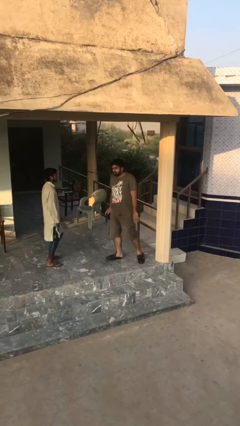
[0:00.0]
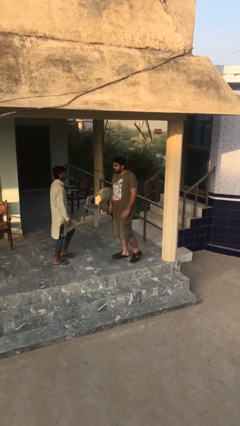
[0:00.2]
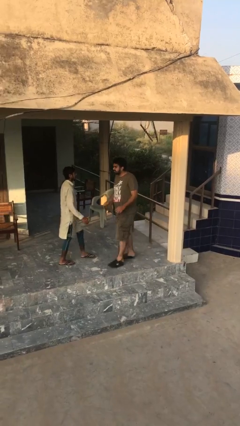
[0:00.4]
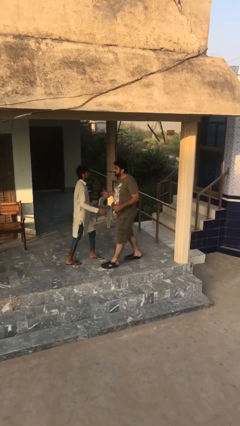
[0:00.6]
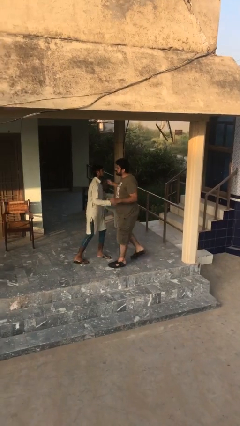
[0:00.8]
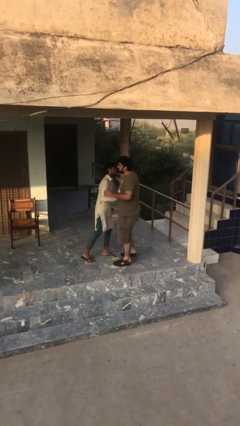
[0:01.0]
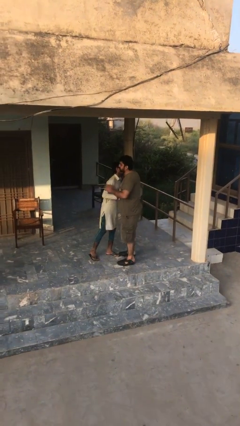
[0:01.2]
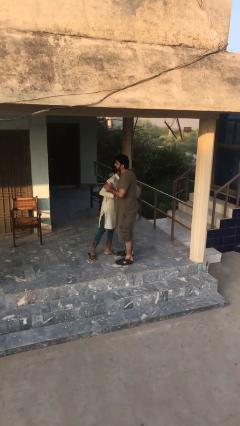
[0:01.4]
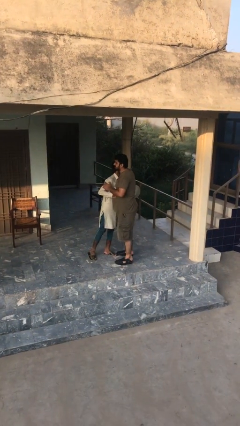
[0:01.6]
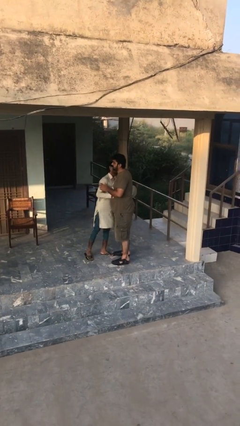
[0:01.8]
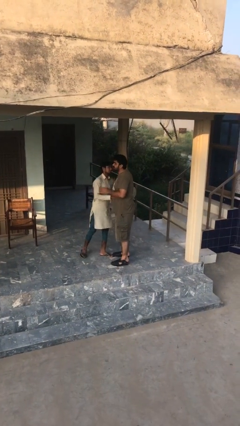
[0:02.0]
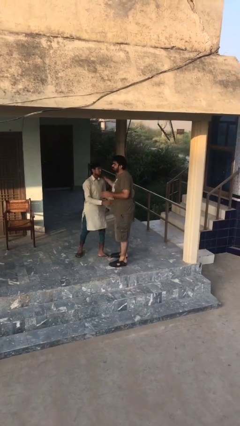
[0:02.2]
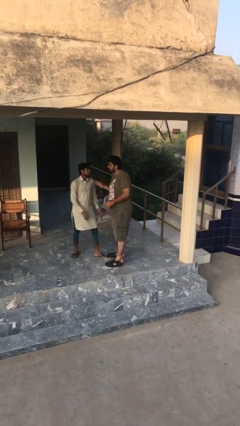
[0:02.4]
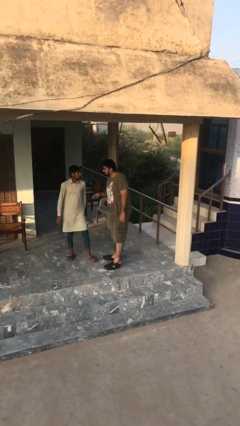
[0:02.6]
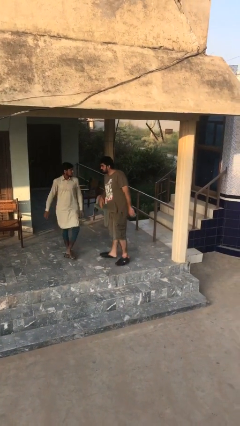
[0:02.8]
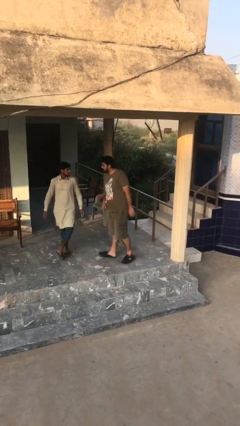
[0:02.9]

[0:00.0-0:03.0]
person embraces person

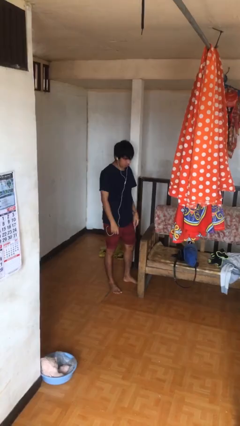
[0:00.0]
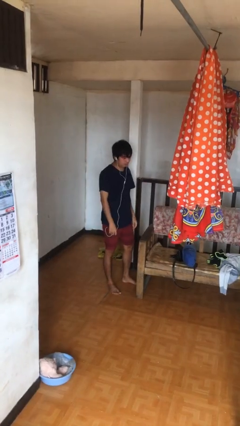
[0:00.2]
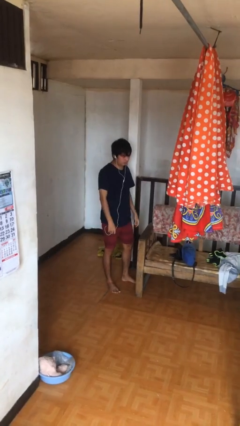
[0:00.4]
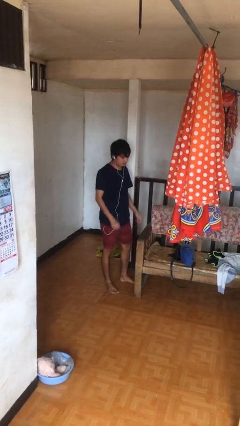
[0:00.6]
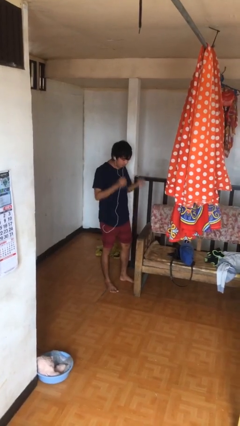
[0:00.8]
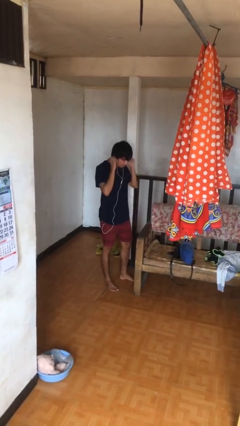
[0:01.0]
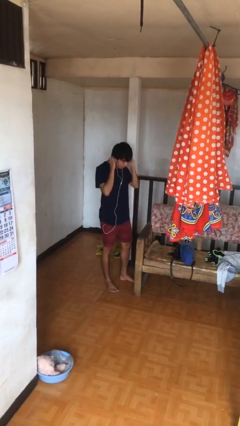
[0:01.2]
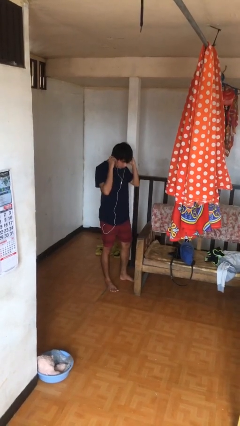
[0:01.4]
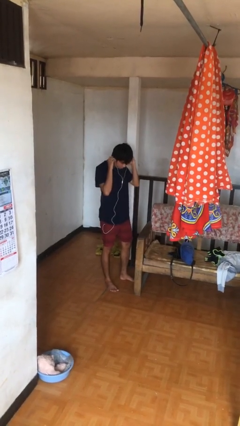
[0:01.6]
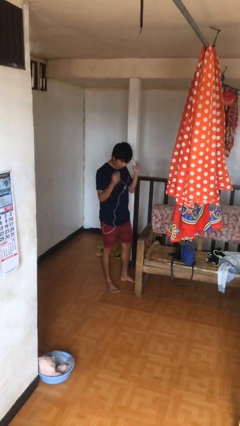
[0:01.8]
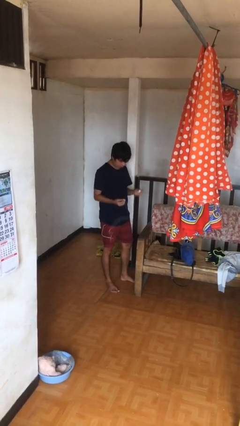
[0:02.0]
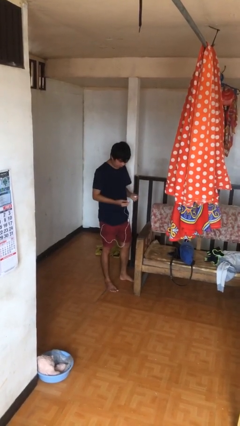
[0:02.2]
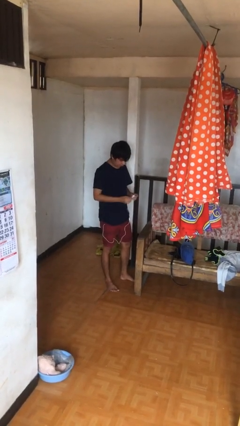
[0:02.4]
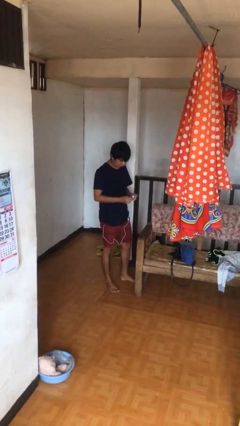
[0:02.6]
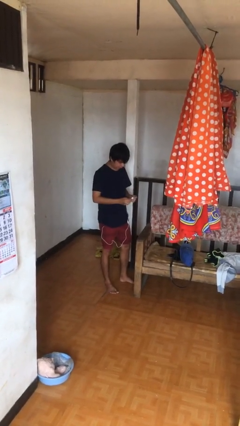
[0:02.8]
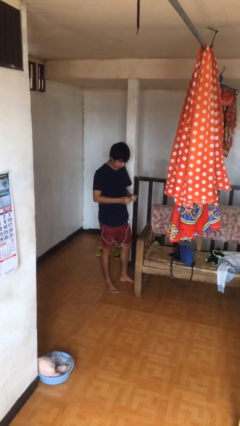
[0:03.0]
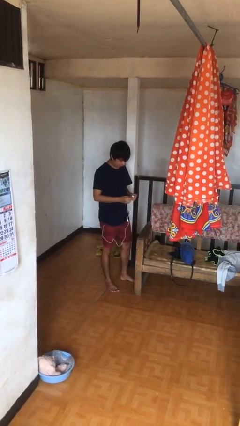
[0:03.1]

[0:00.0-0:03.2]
person takes off headphones

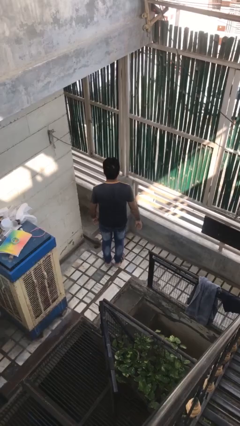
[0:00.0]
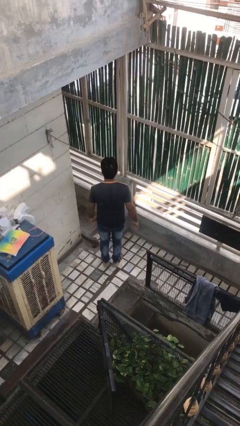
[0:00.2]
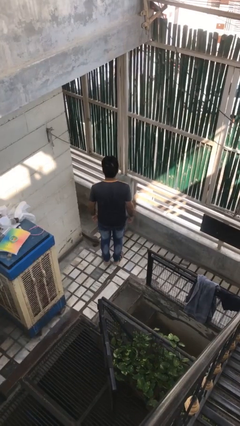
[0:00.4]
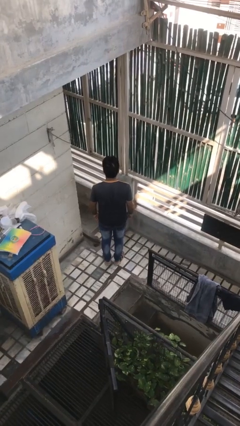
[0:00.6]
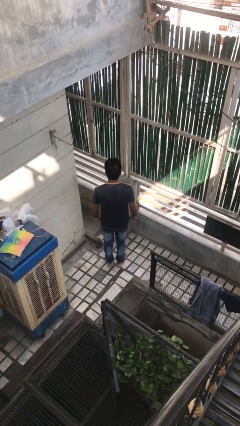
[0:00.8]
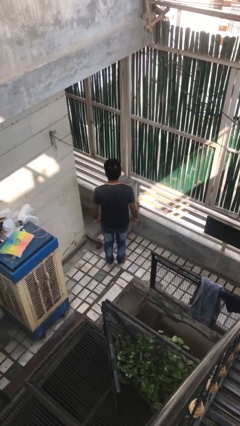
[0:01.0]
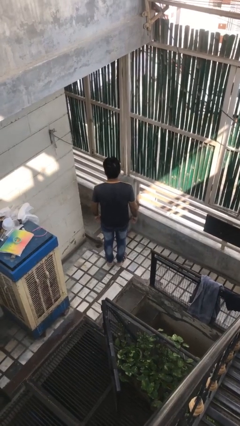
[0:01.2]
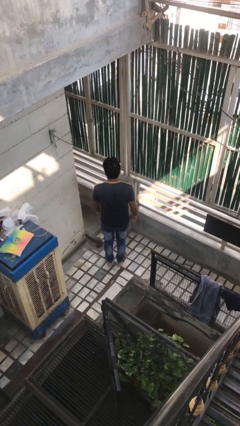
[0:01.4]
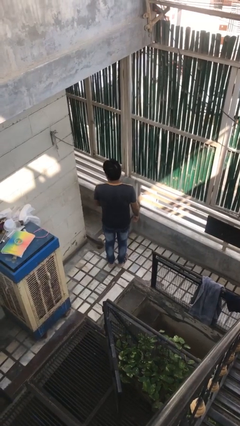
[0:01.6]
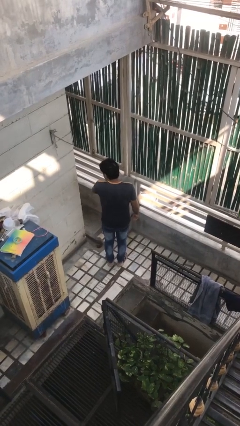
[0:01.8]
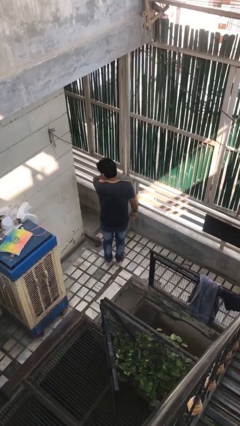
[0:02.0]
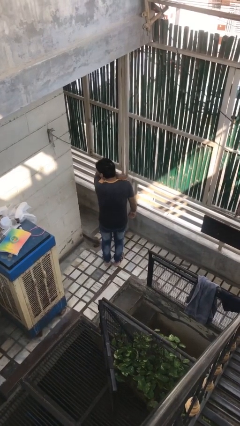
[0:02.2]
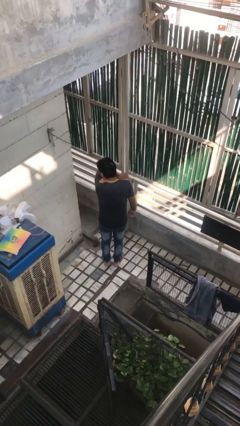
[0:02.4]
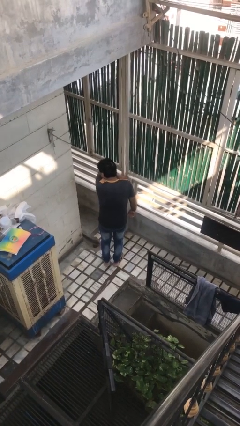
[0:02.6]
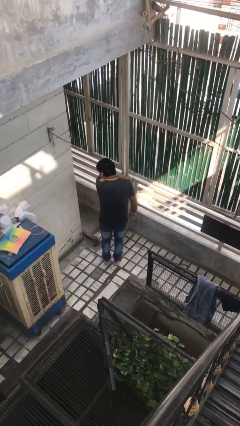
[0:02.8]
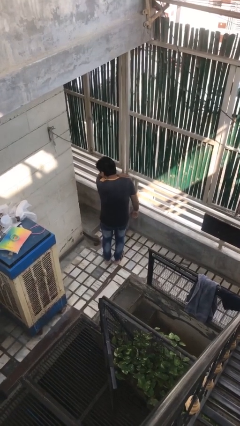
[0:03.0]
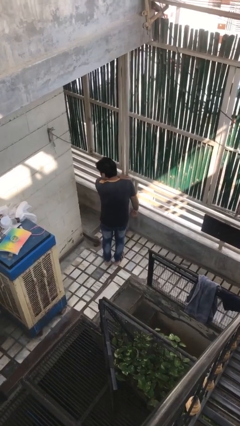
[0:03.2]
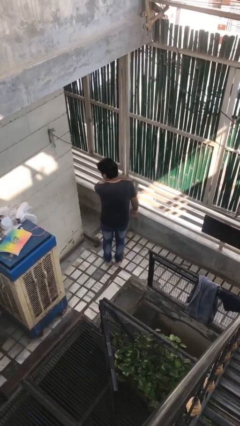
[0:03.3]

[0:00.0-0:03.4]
person sneezes into arm

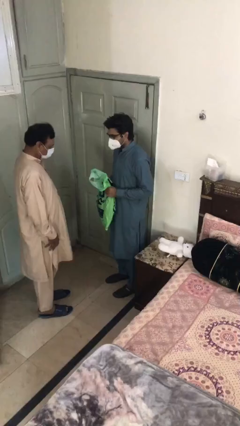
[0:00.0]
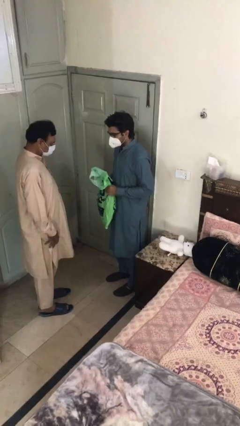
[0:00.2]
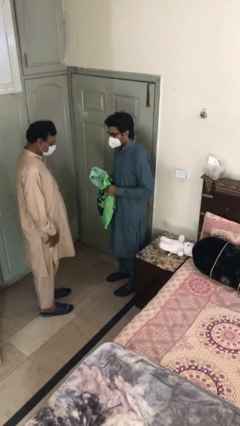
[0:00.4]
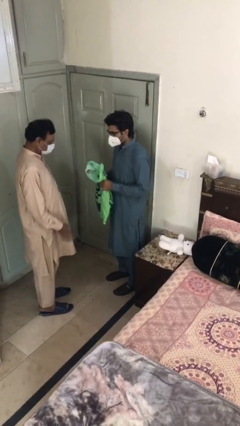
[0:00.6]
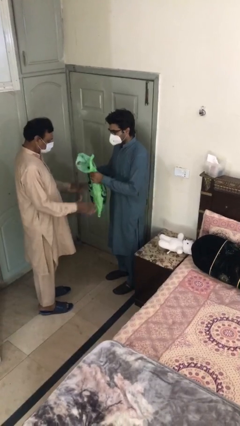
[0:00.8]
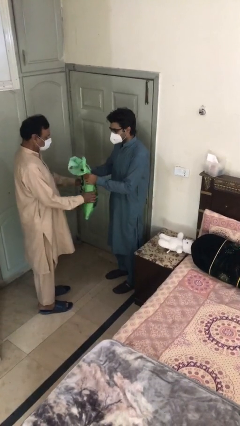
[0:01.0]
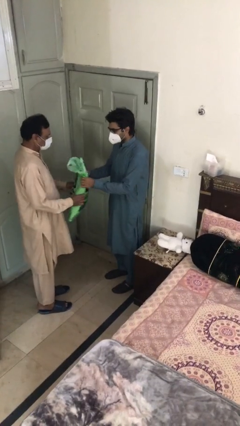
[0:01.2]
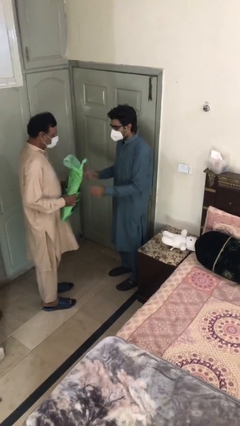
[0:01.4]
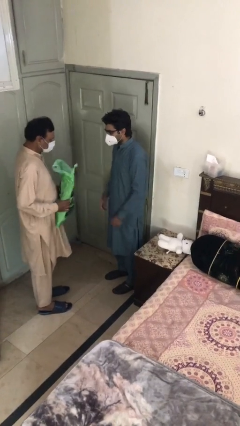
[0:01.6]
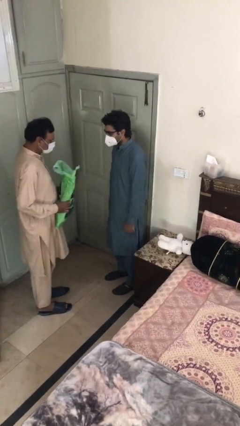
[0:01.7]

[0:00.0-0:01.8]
person transfers object to person

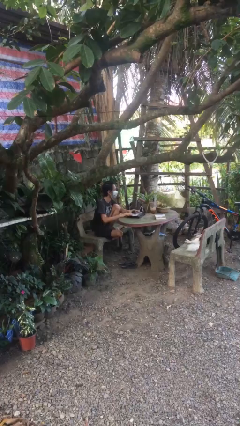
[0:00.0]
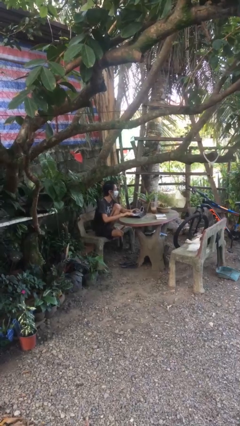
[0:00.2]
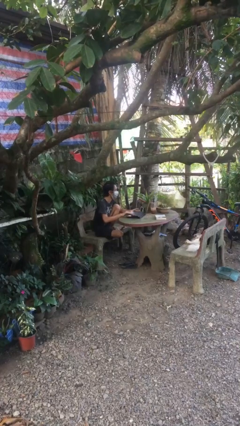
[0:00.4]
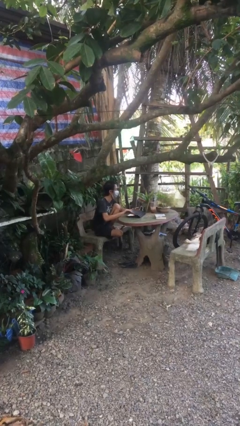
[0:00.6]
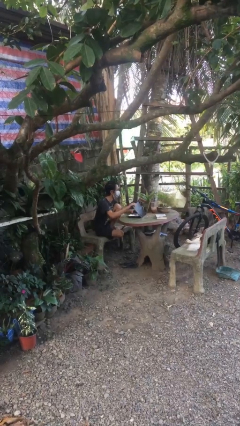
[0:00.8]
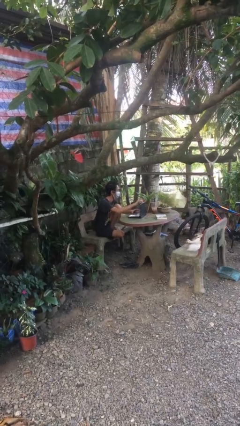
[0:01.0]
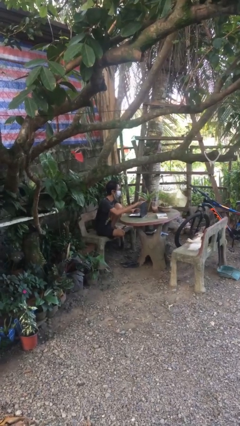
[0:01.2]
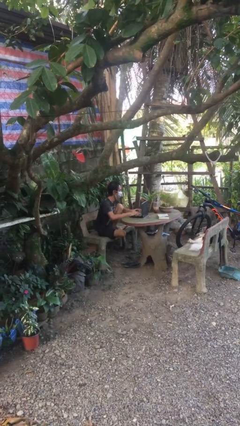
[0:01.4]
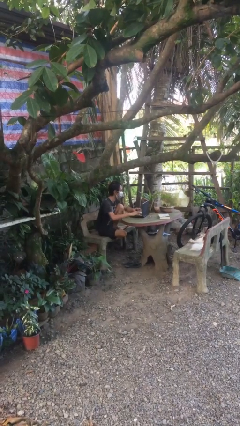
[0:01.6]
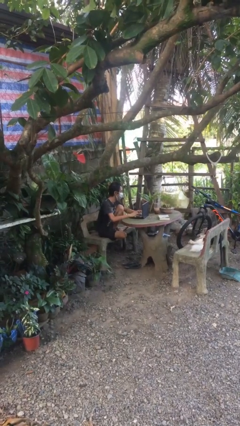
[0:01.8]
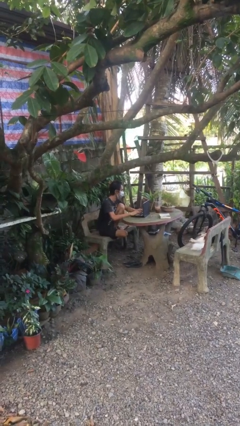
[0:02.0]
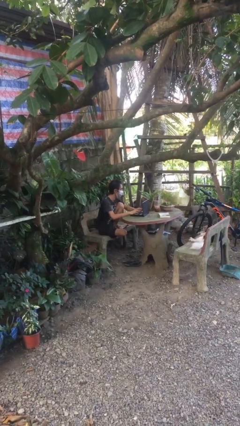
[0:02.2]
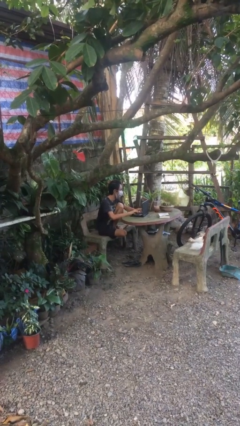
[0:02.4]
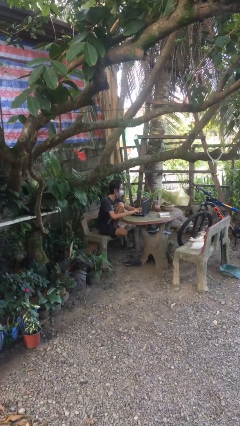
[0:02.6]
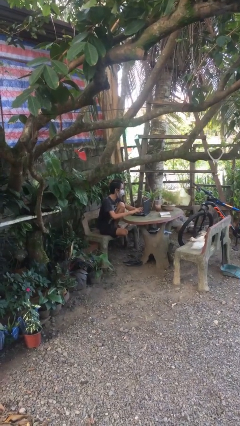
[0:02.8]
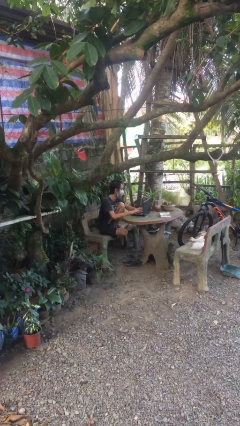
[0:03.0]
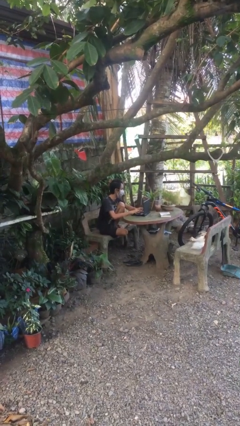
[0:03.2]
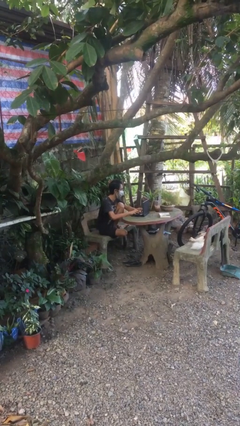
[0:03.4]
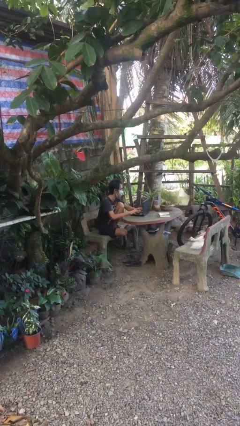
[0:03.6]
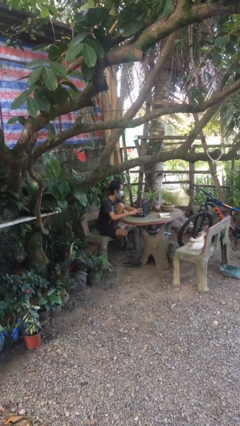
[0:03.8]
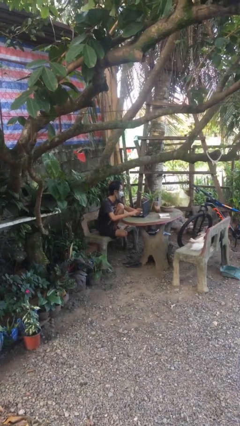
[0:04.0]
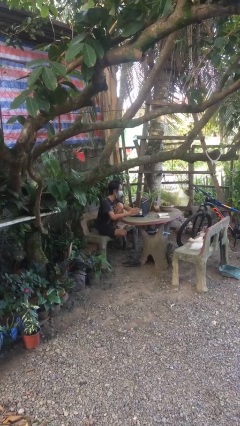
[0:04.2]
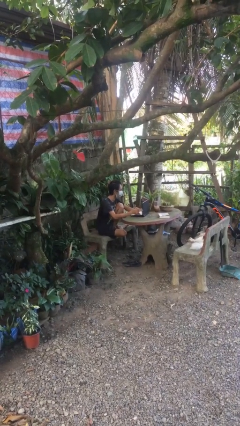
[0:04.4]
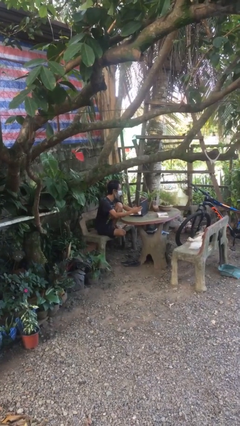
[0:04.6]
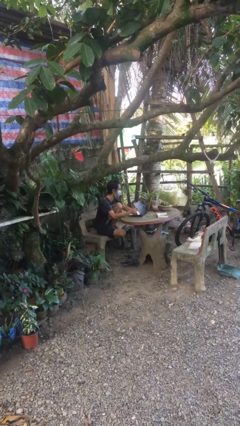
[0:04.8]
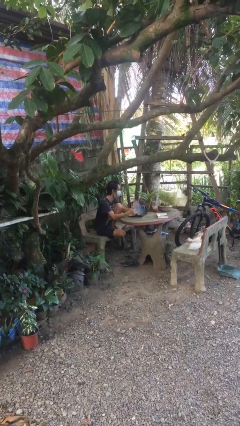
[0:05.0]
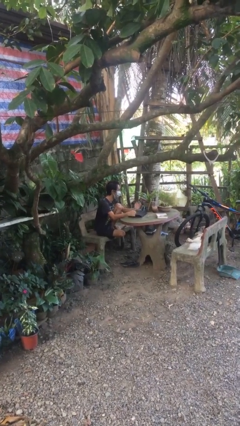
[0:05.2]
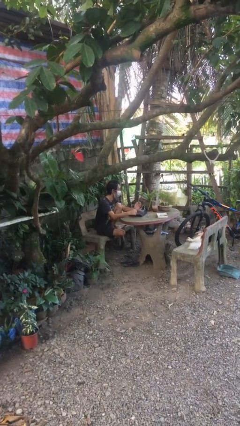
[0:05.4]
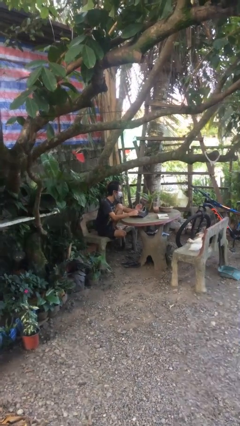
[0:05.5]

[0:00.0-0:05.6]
person interacts with laptop

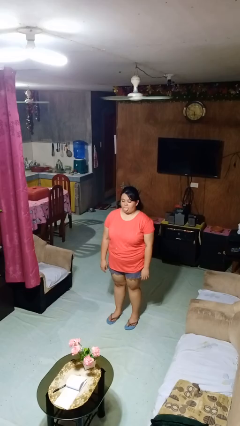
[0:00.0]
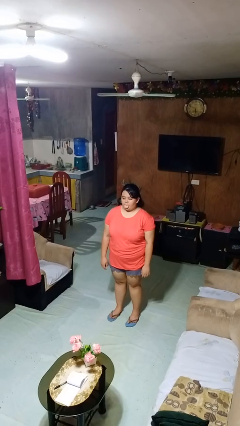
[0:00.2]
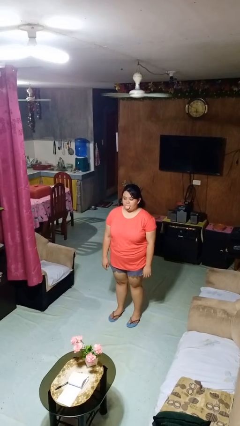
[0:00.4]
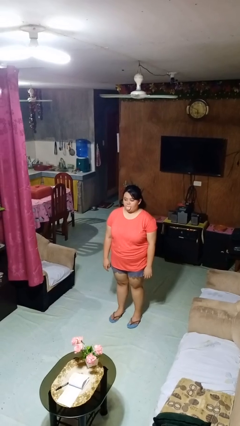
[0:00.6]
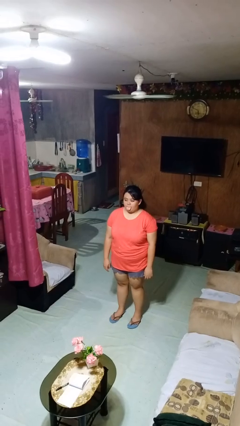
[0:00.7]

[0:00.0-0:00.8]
person sticks out tongue

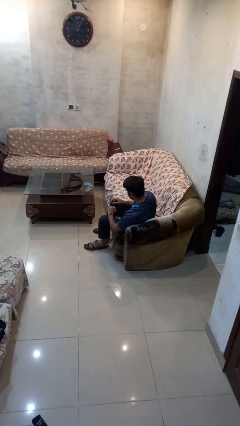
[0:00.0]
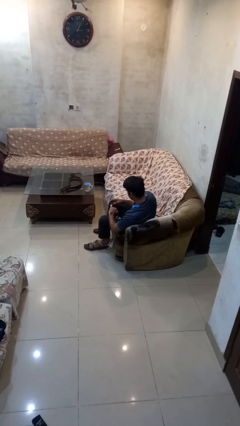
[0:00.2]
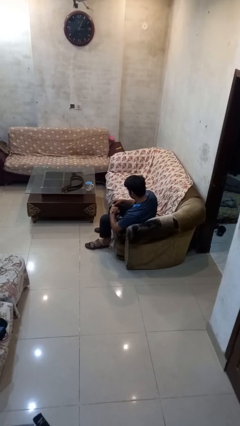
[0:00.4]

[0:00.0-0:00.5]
person takes off ring
